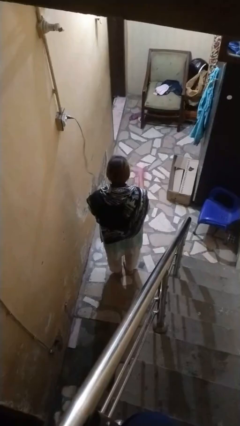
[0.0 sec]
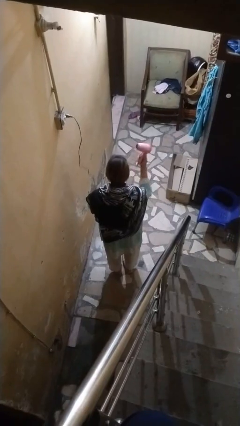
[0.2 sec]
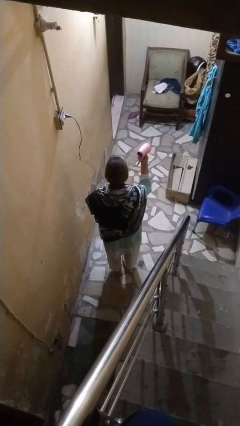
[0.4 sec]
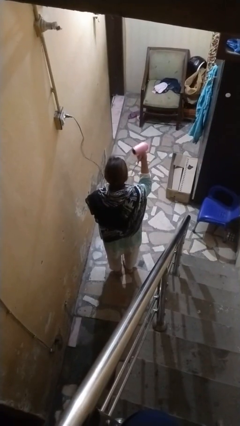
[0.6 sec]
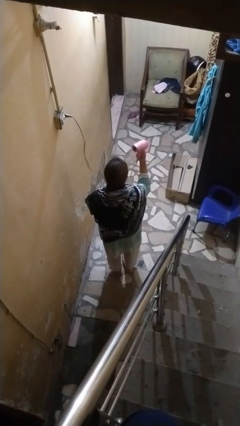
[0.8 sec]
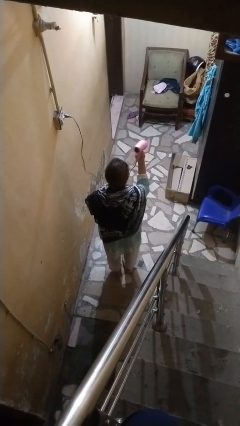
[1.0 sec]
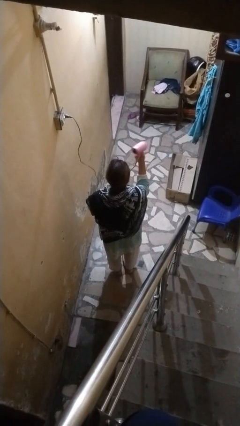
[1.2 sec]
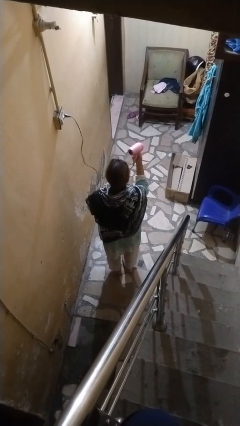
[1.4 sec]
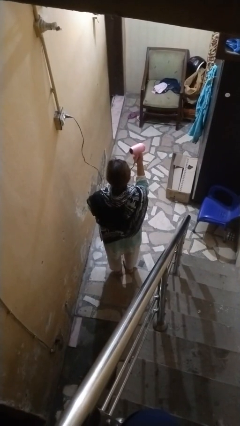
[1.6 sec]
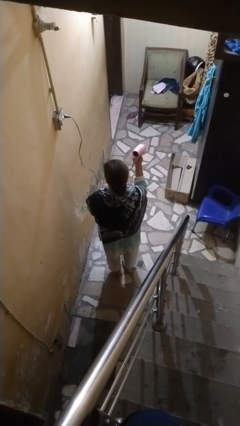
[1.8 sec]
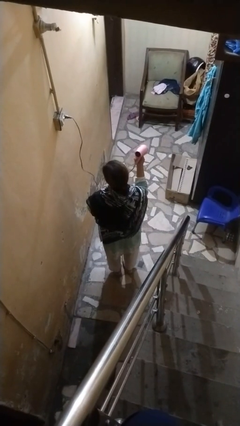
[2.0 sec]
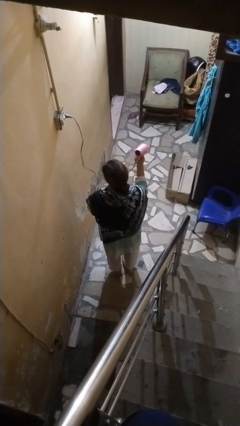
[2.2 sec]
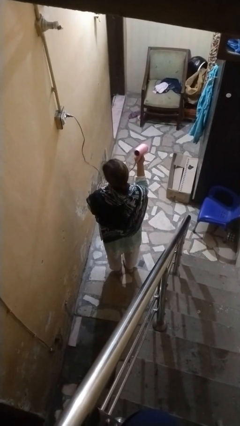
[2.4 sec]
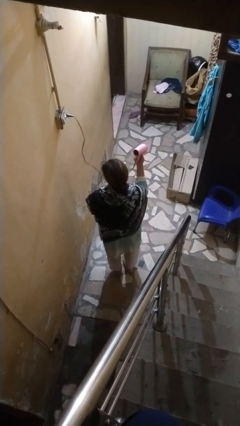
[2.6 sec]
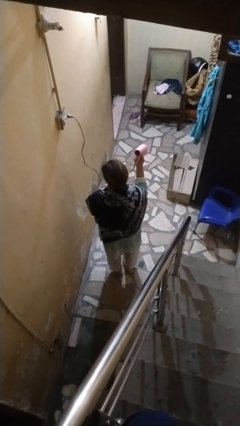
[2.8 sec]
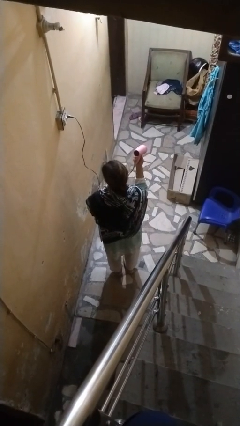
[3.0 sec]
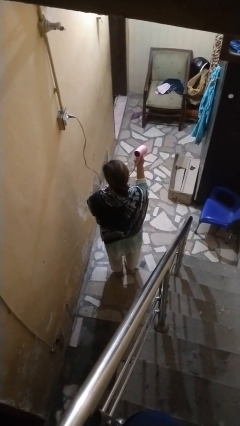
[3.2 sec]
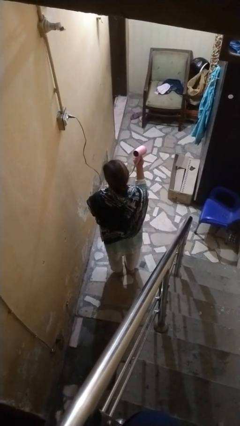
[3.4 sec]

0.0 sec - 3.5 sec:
person dries hair with hairdryer

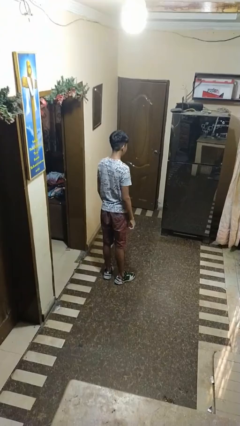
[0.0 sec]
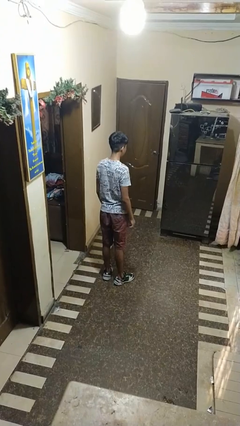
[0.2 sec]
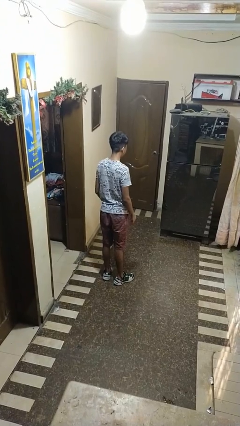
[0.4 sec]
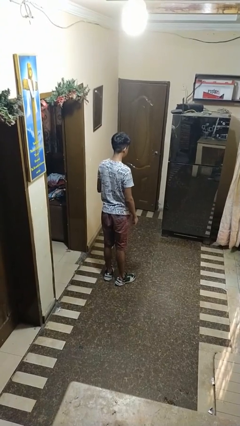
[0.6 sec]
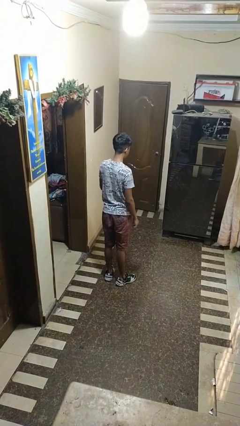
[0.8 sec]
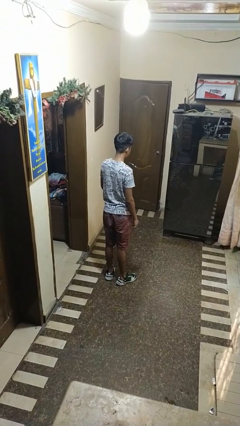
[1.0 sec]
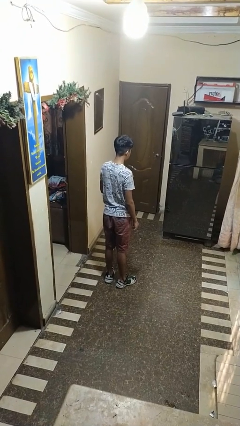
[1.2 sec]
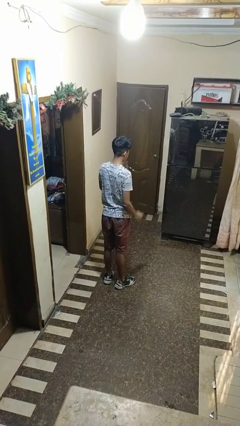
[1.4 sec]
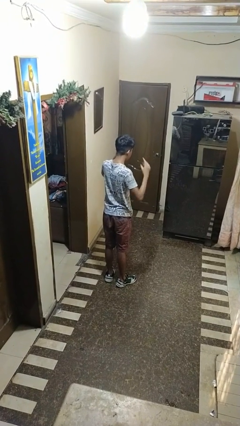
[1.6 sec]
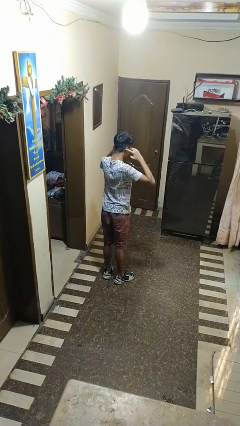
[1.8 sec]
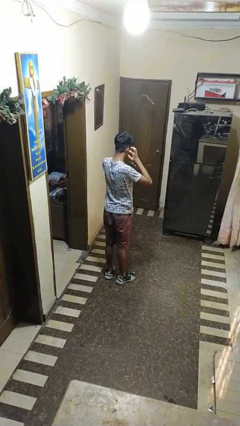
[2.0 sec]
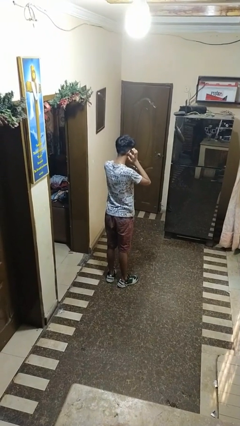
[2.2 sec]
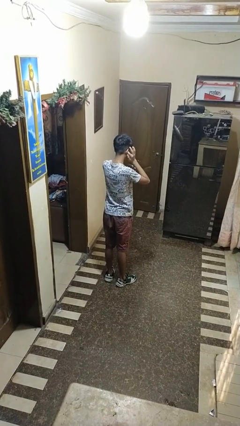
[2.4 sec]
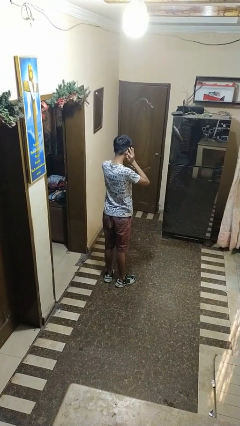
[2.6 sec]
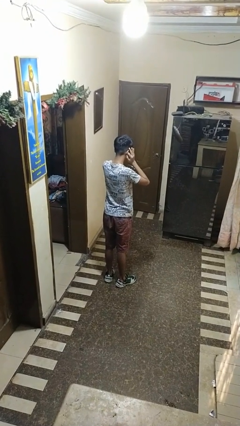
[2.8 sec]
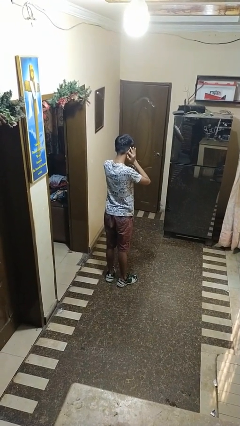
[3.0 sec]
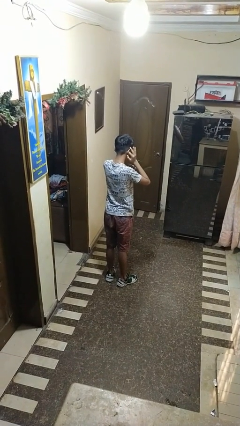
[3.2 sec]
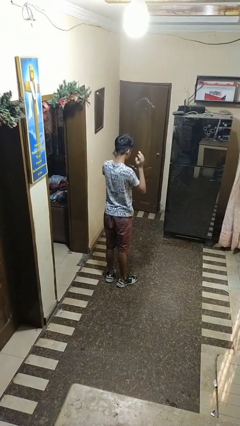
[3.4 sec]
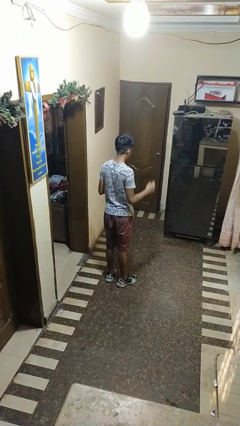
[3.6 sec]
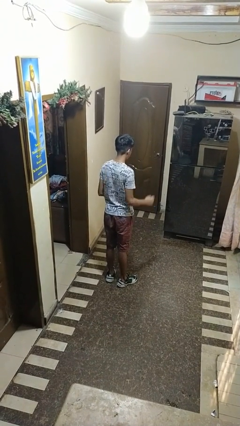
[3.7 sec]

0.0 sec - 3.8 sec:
person puts fingers in ear

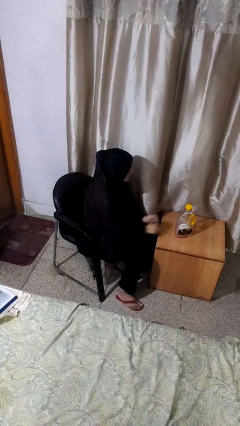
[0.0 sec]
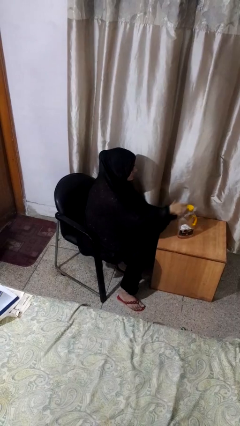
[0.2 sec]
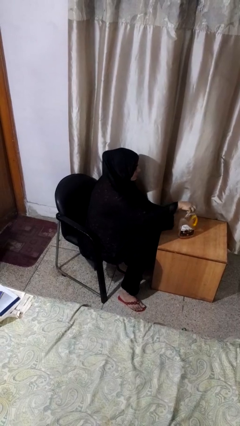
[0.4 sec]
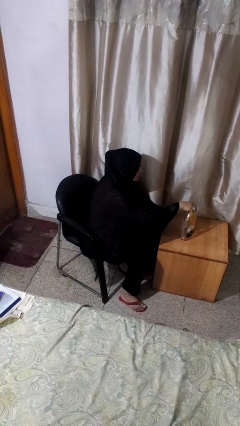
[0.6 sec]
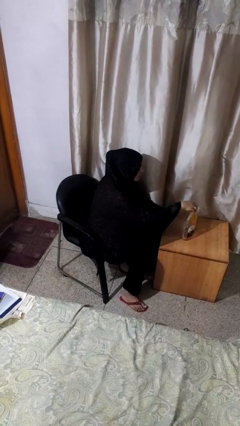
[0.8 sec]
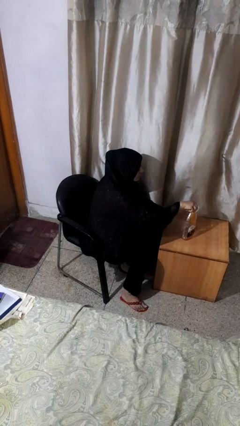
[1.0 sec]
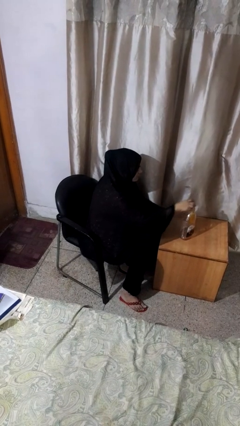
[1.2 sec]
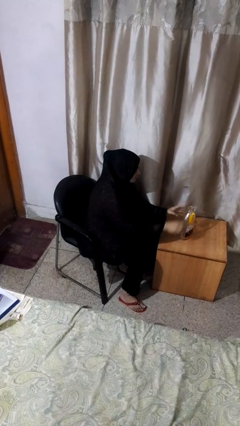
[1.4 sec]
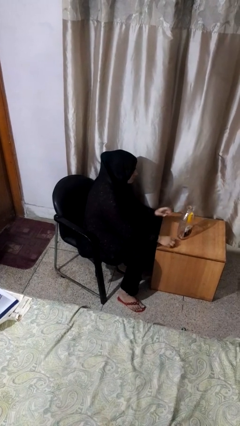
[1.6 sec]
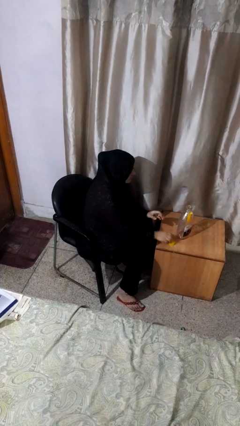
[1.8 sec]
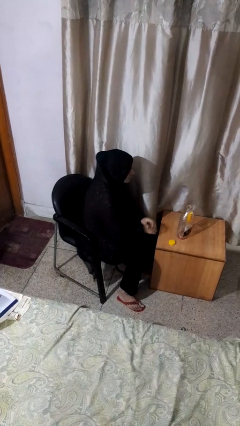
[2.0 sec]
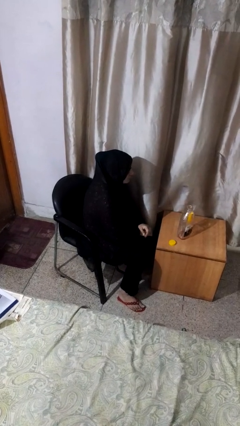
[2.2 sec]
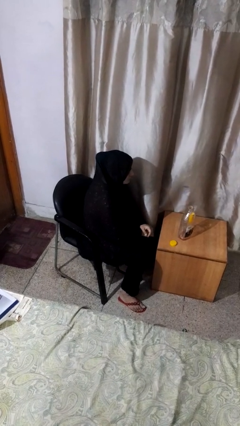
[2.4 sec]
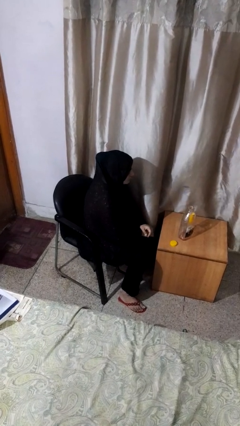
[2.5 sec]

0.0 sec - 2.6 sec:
person unscrews lid from bottle

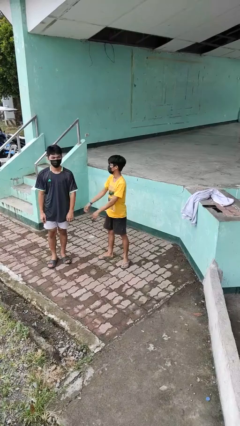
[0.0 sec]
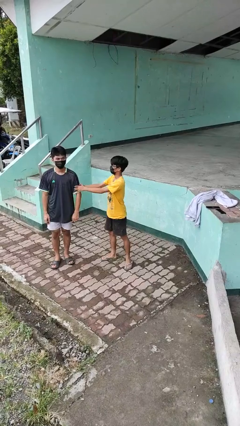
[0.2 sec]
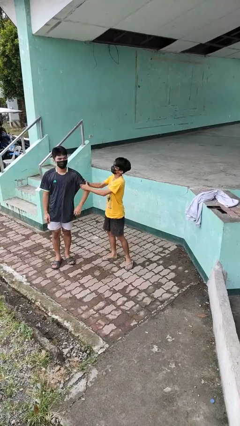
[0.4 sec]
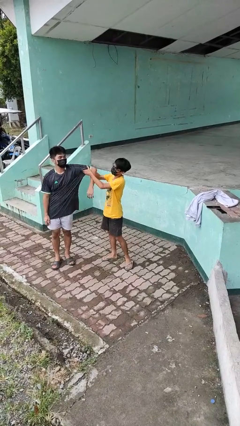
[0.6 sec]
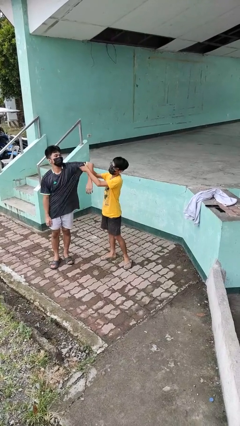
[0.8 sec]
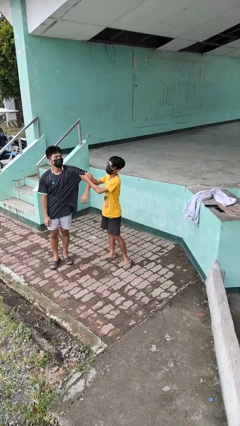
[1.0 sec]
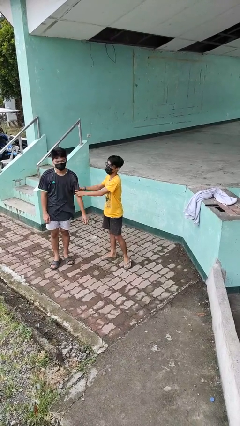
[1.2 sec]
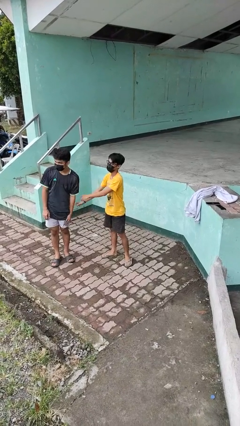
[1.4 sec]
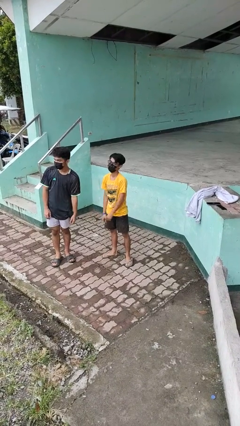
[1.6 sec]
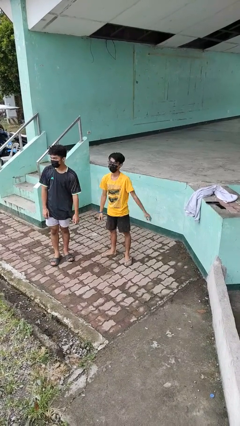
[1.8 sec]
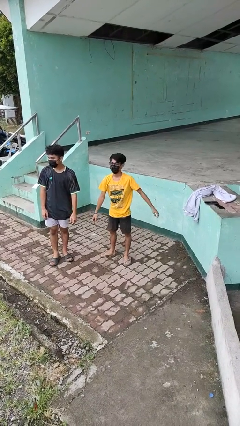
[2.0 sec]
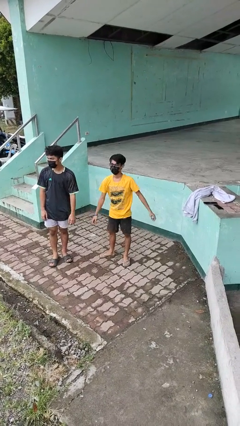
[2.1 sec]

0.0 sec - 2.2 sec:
person grabs person by bicep

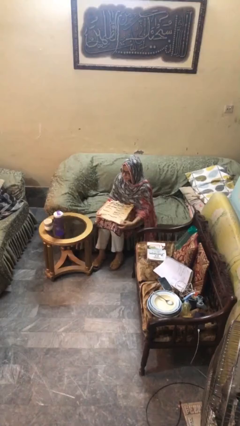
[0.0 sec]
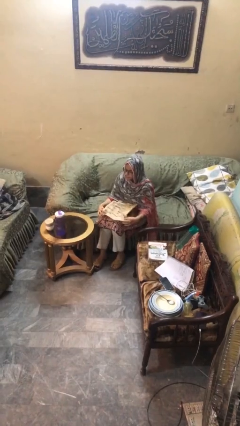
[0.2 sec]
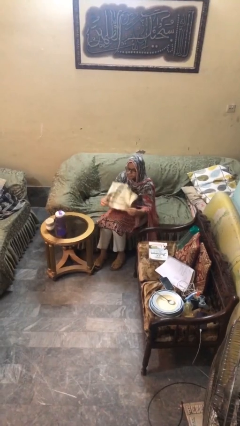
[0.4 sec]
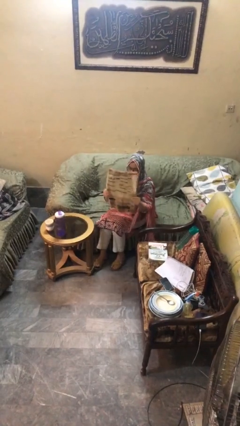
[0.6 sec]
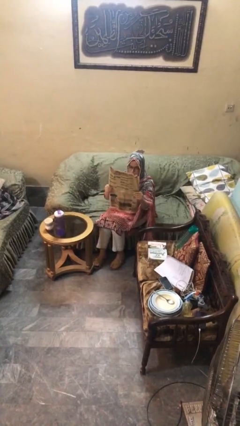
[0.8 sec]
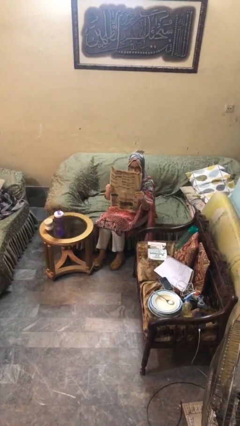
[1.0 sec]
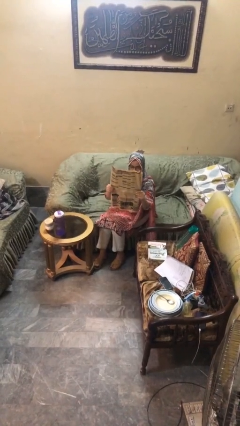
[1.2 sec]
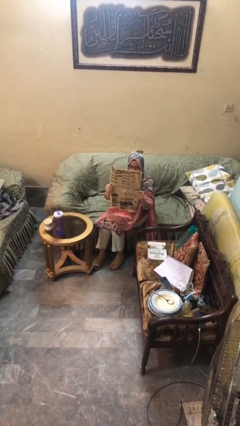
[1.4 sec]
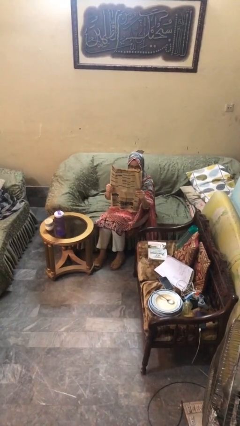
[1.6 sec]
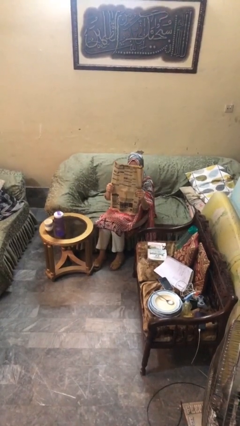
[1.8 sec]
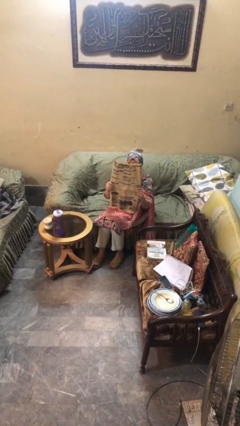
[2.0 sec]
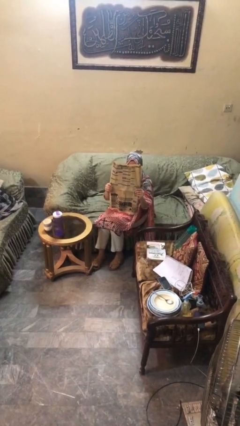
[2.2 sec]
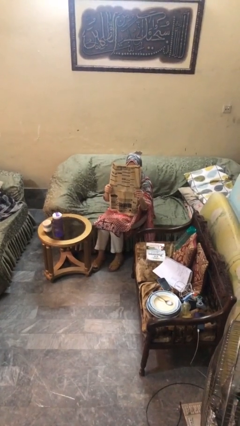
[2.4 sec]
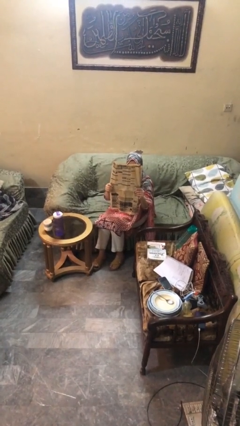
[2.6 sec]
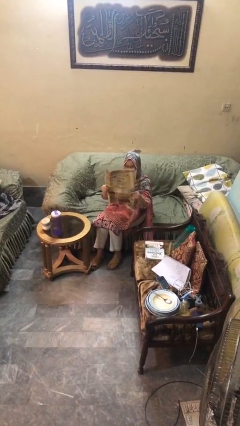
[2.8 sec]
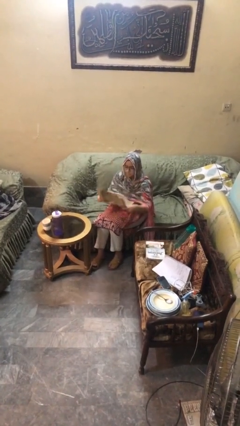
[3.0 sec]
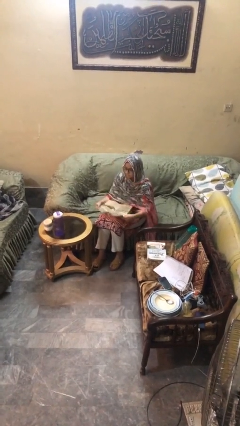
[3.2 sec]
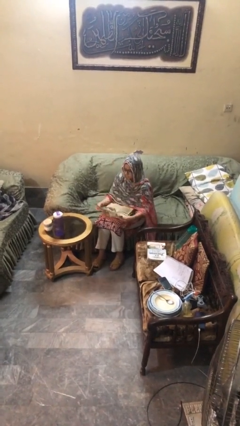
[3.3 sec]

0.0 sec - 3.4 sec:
person reads newspaper

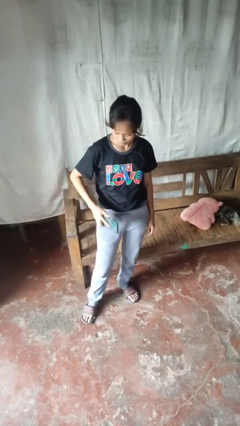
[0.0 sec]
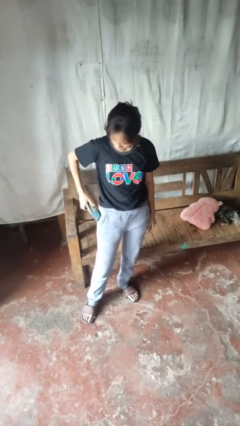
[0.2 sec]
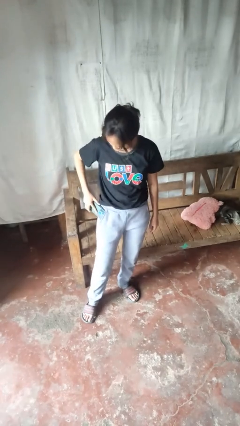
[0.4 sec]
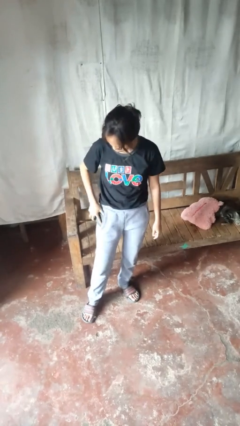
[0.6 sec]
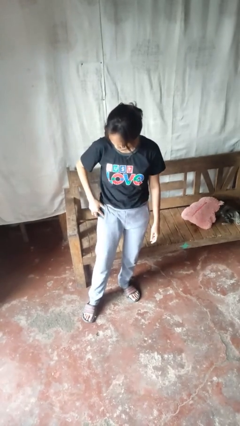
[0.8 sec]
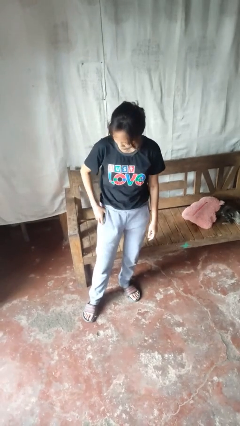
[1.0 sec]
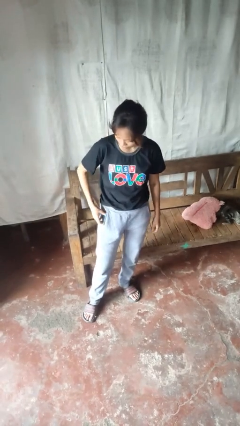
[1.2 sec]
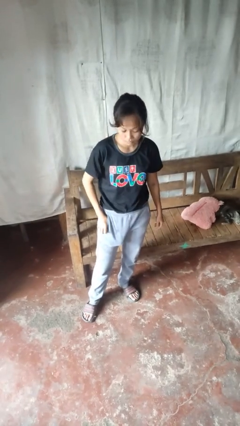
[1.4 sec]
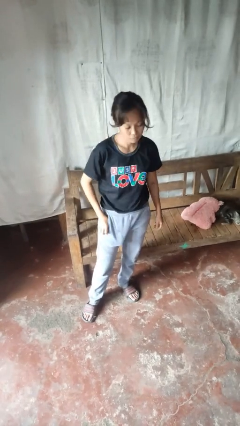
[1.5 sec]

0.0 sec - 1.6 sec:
person puts phone into pocket

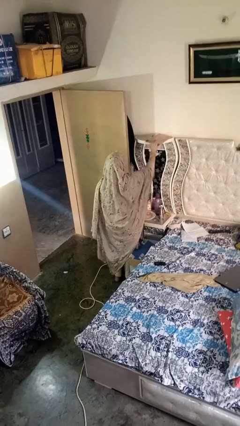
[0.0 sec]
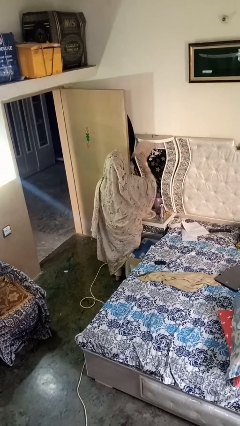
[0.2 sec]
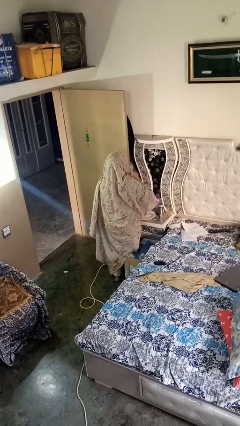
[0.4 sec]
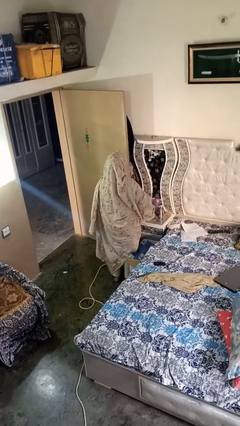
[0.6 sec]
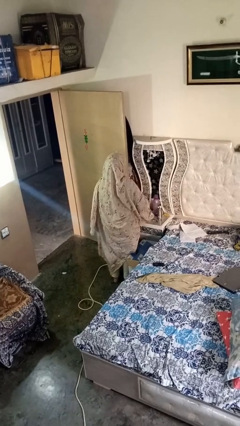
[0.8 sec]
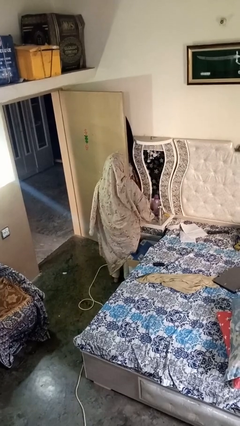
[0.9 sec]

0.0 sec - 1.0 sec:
person picks up object from shelf
